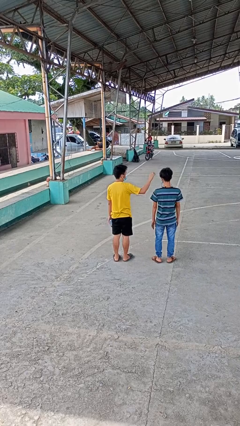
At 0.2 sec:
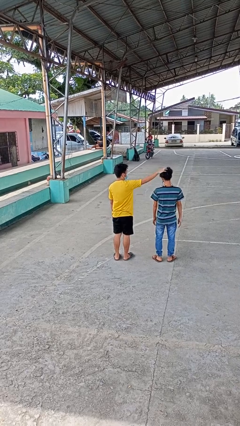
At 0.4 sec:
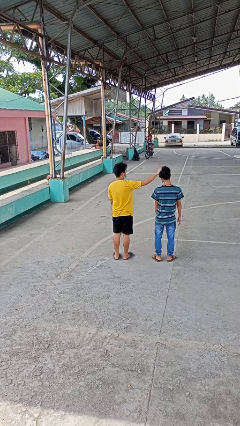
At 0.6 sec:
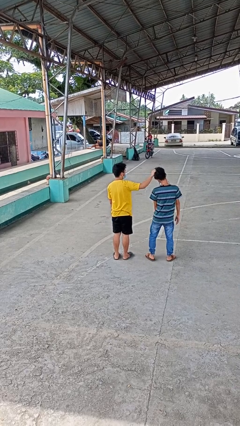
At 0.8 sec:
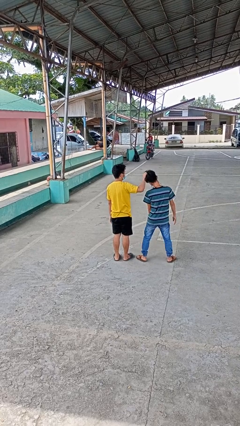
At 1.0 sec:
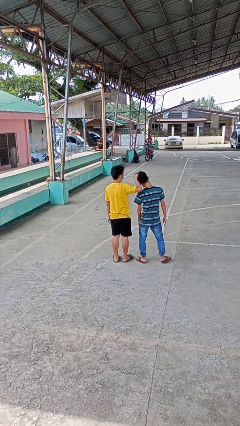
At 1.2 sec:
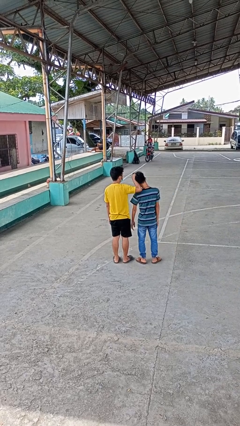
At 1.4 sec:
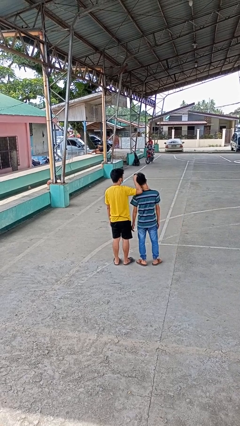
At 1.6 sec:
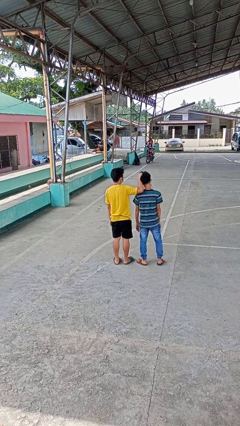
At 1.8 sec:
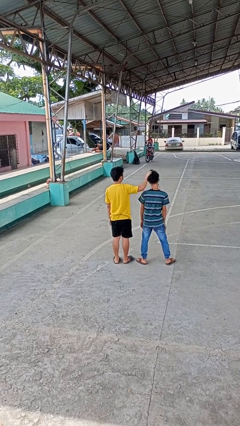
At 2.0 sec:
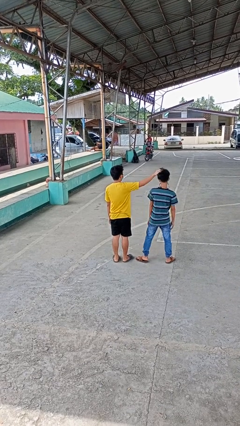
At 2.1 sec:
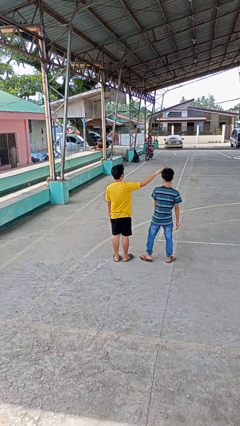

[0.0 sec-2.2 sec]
person grabs person by hair

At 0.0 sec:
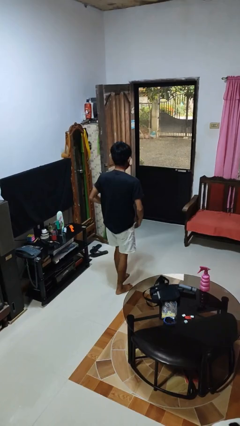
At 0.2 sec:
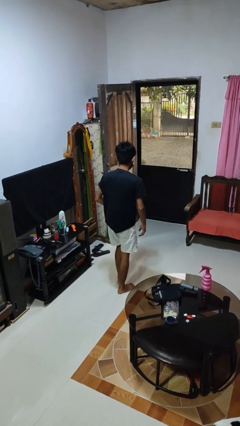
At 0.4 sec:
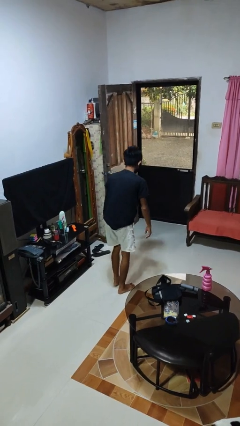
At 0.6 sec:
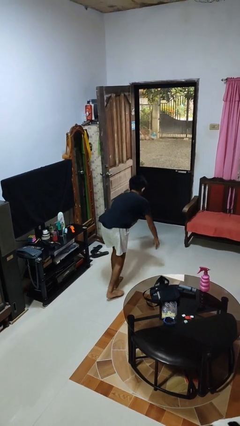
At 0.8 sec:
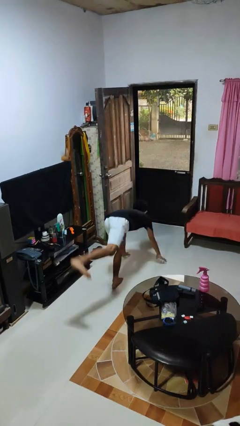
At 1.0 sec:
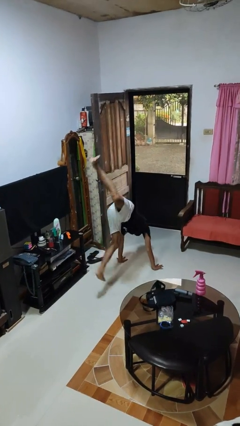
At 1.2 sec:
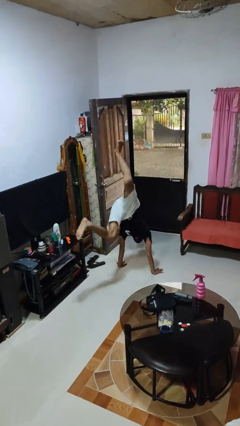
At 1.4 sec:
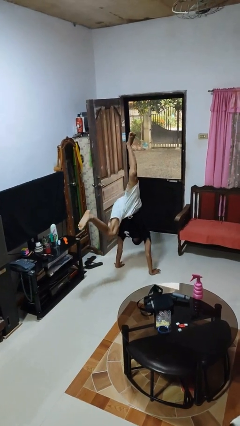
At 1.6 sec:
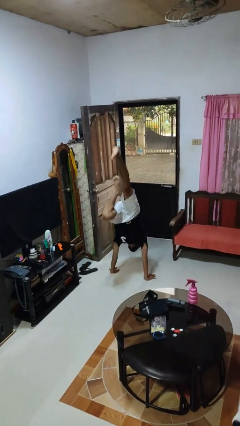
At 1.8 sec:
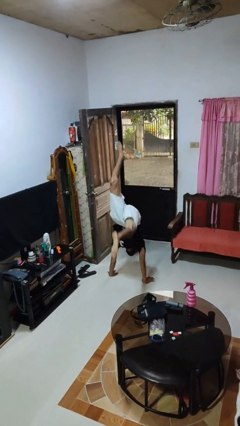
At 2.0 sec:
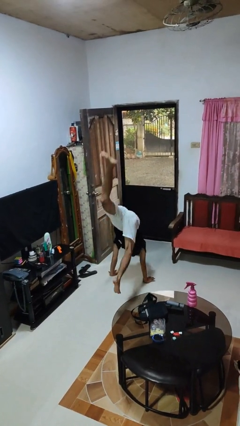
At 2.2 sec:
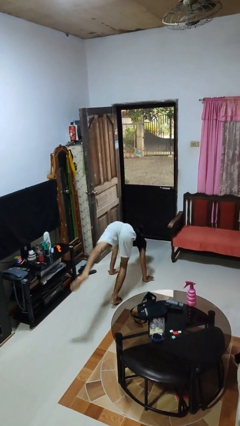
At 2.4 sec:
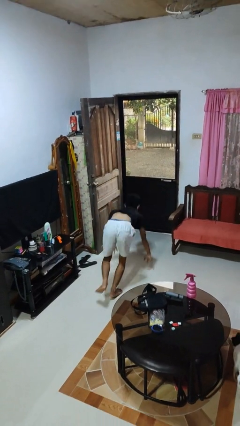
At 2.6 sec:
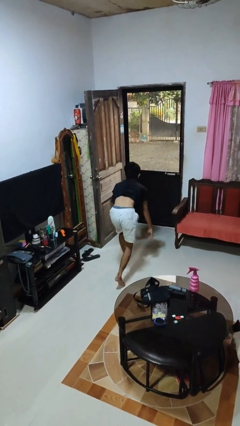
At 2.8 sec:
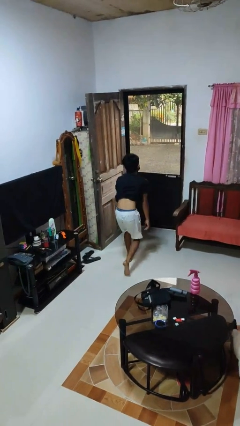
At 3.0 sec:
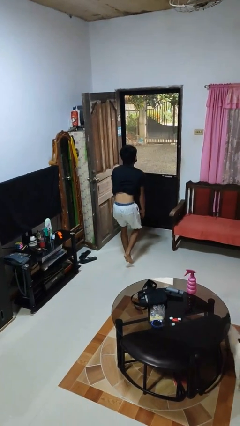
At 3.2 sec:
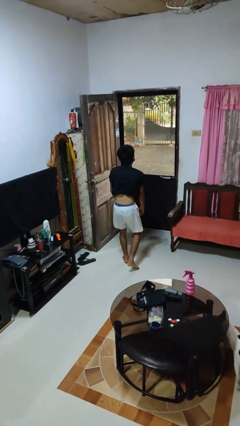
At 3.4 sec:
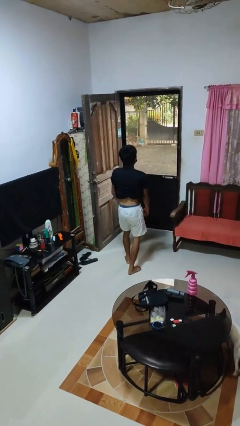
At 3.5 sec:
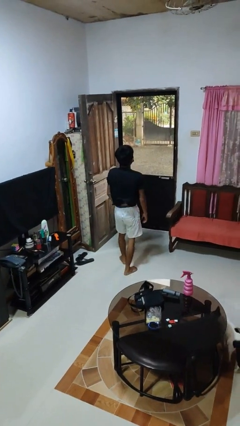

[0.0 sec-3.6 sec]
person handstand

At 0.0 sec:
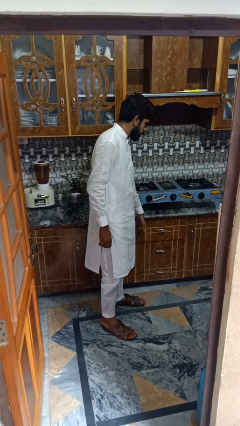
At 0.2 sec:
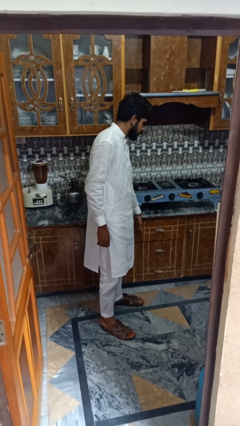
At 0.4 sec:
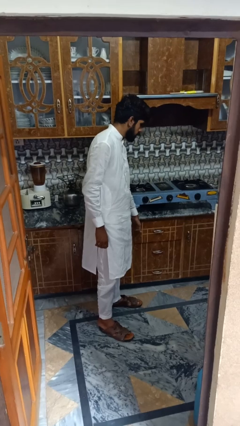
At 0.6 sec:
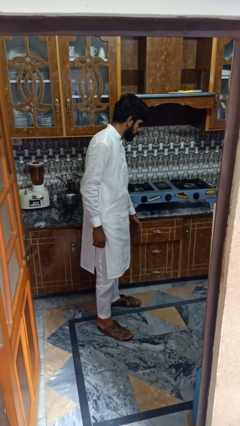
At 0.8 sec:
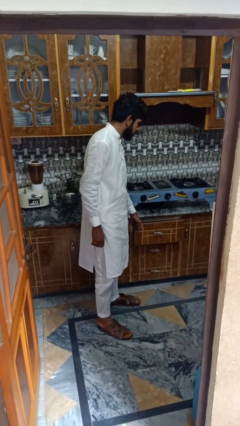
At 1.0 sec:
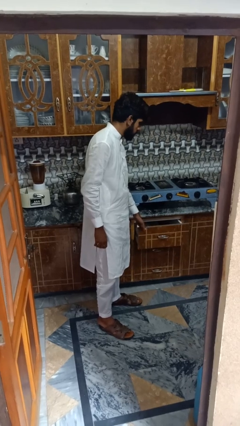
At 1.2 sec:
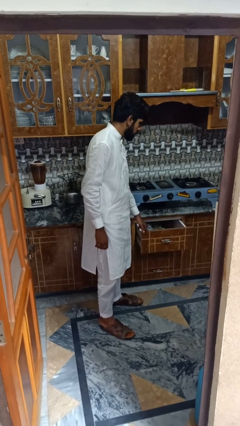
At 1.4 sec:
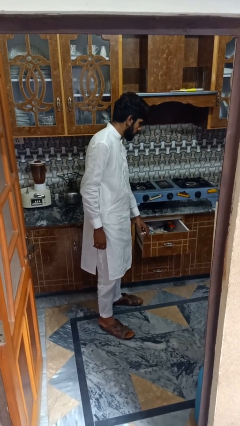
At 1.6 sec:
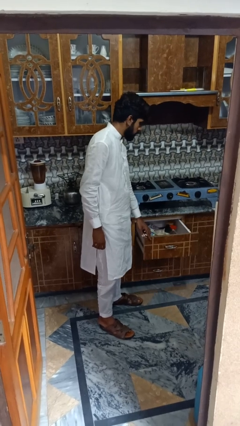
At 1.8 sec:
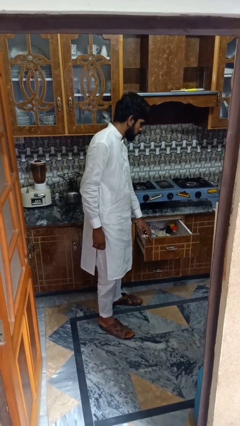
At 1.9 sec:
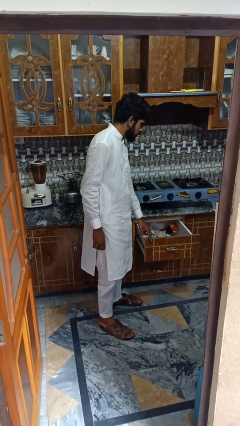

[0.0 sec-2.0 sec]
person opens kitchen drawer

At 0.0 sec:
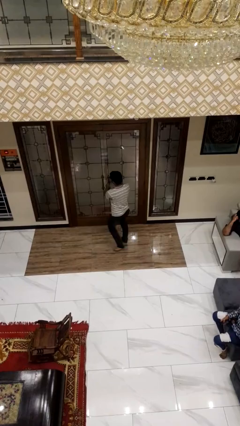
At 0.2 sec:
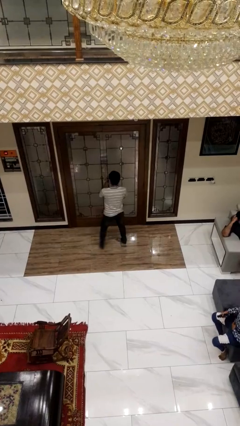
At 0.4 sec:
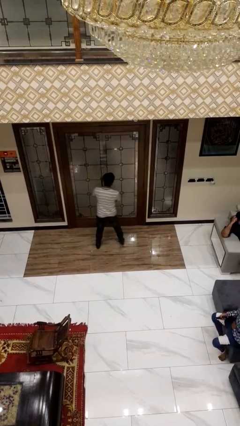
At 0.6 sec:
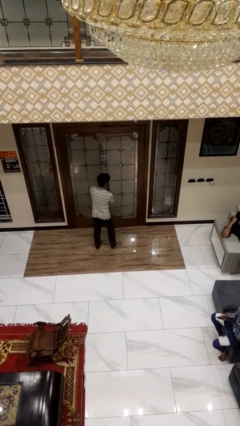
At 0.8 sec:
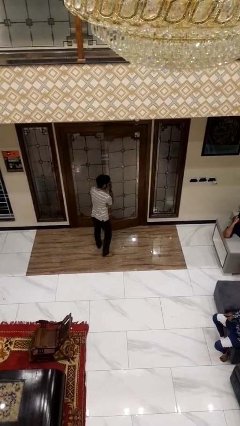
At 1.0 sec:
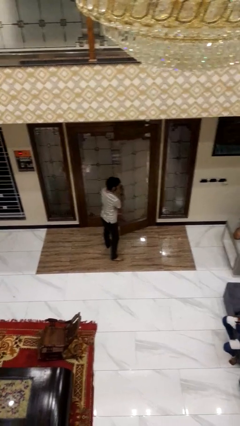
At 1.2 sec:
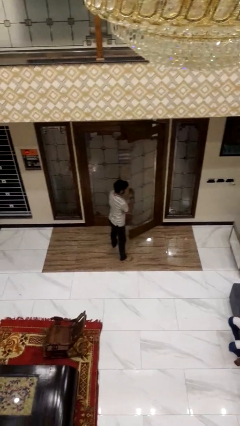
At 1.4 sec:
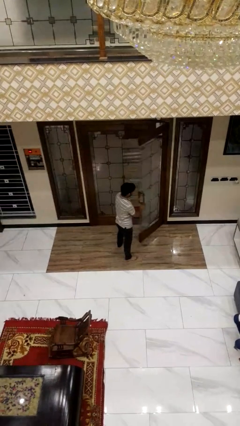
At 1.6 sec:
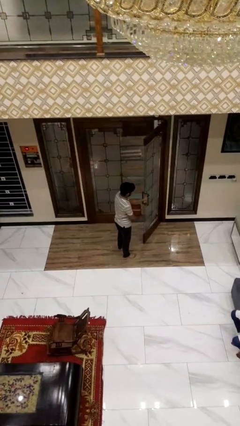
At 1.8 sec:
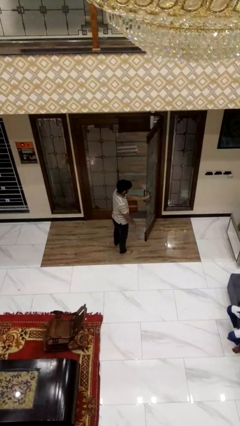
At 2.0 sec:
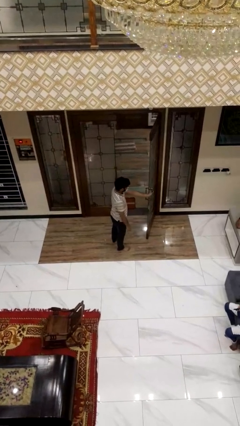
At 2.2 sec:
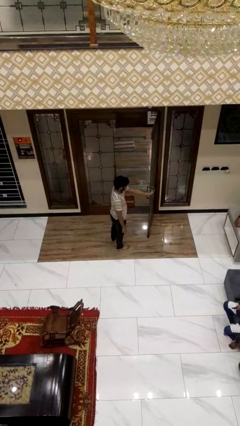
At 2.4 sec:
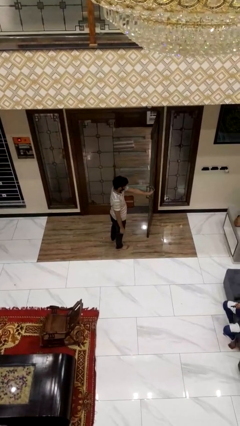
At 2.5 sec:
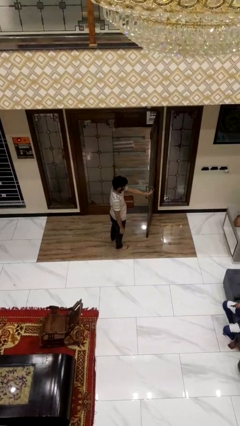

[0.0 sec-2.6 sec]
person opens facility door

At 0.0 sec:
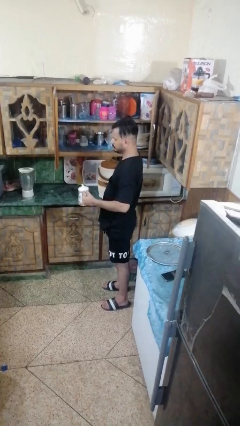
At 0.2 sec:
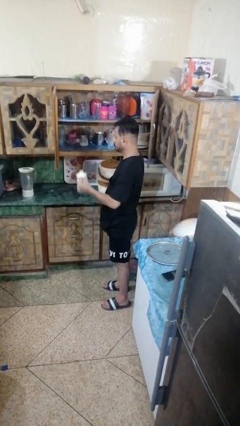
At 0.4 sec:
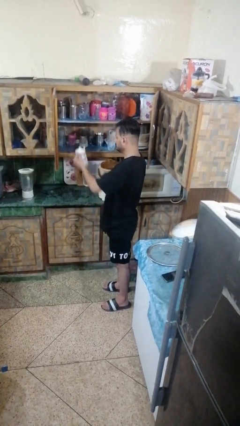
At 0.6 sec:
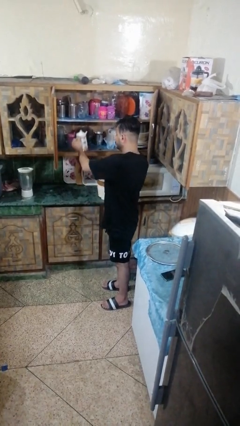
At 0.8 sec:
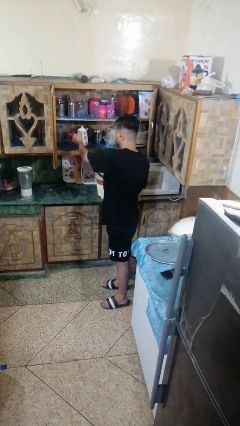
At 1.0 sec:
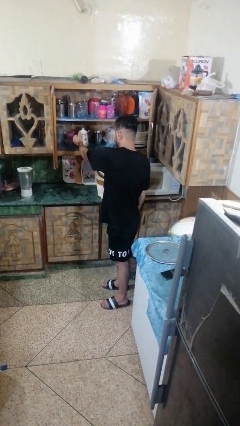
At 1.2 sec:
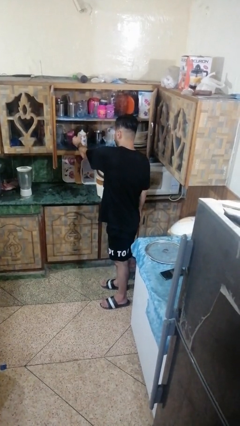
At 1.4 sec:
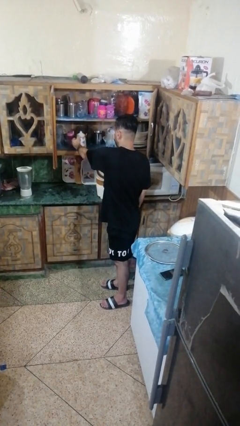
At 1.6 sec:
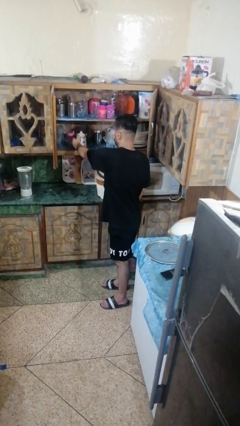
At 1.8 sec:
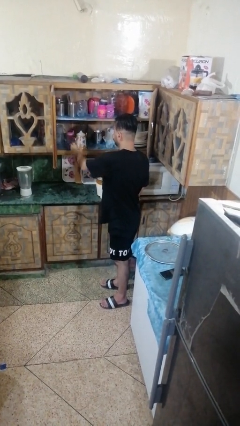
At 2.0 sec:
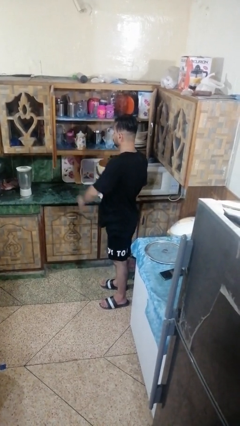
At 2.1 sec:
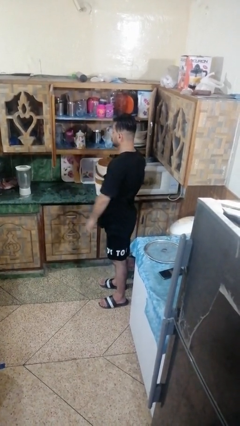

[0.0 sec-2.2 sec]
person puts down object into cabinet

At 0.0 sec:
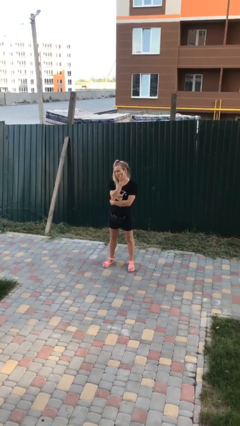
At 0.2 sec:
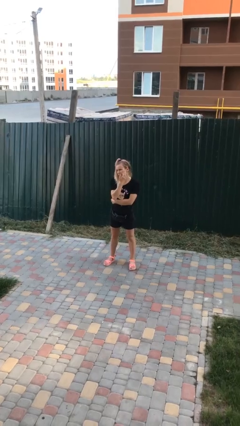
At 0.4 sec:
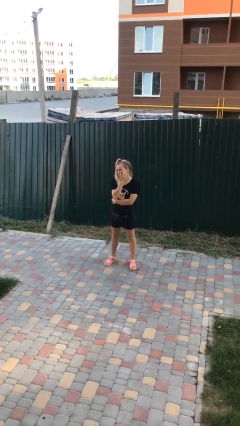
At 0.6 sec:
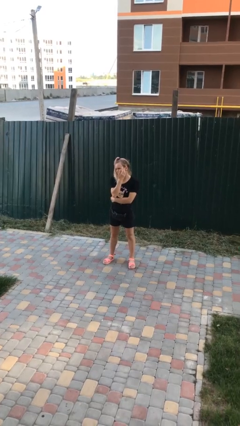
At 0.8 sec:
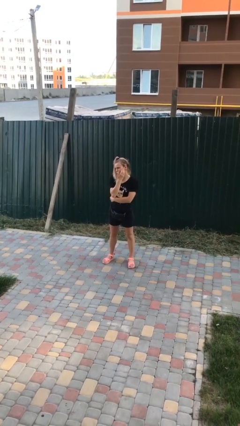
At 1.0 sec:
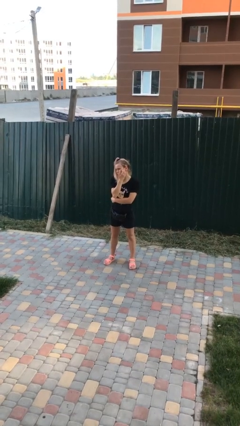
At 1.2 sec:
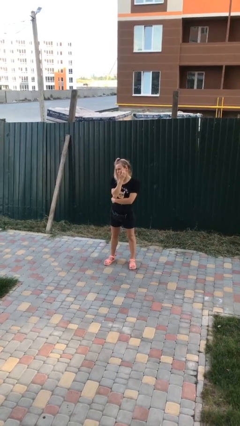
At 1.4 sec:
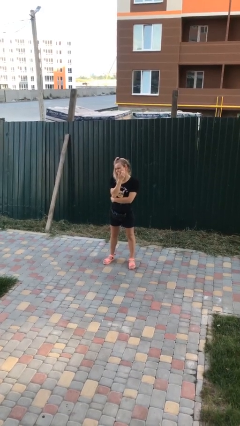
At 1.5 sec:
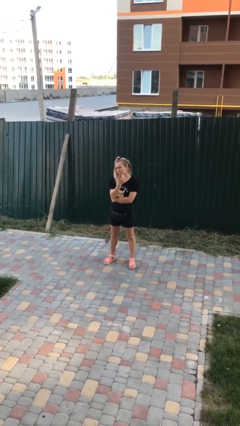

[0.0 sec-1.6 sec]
person scratches face

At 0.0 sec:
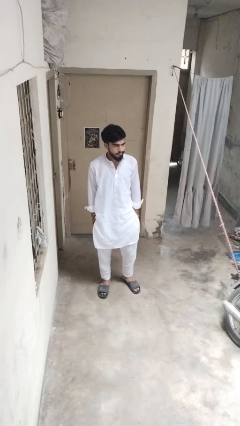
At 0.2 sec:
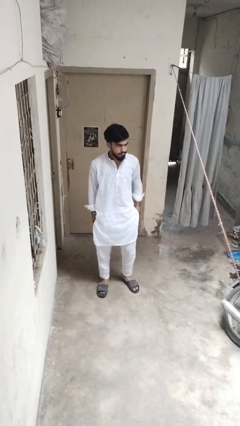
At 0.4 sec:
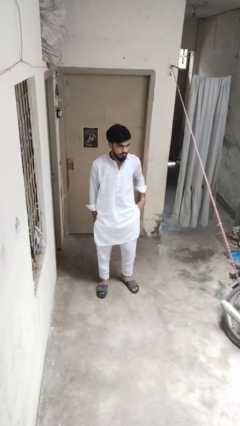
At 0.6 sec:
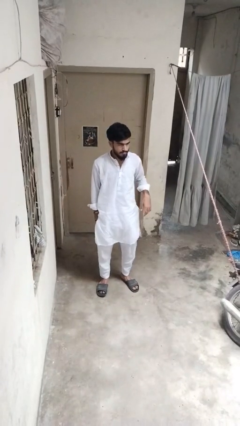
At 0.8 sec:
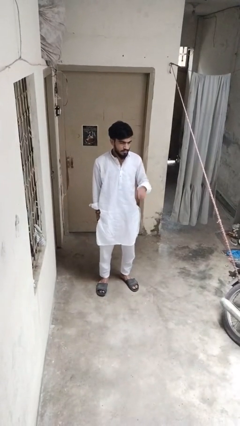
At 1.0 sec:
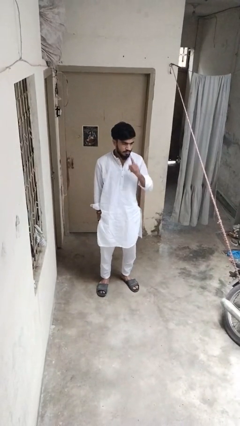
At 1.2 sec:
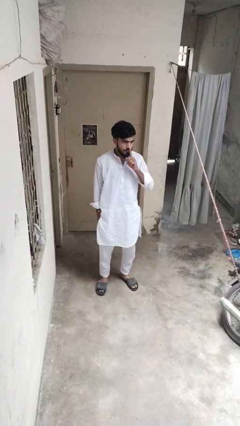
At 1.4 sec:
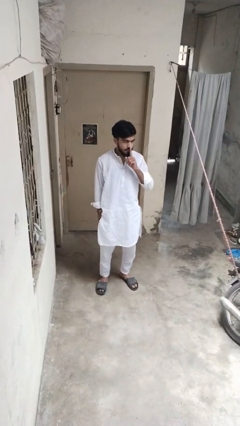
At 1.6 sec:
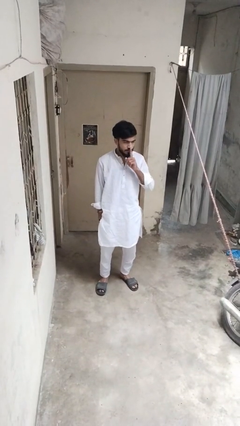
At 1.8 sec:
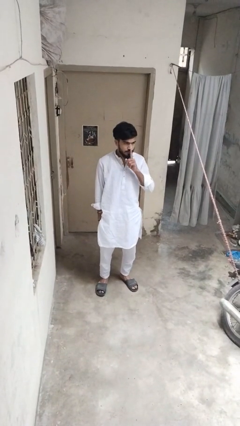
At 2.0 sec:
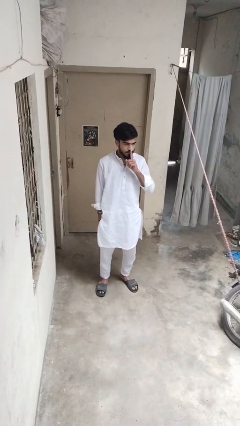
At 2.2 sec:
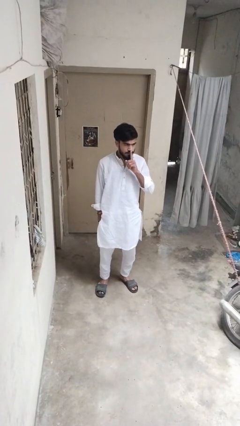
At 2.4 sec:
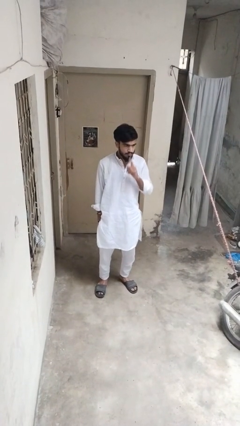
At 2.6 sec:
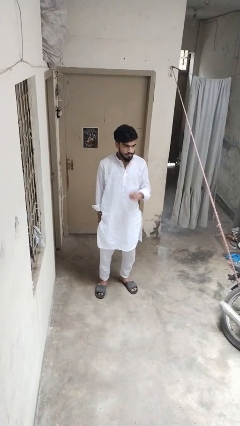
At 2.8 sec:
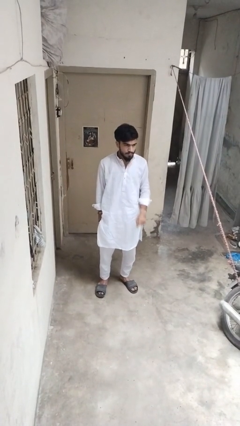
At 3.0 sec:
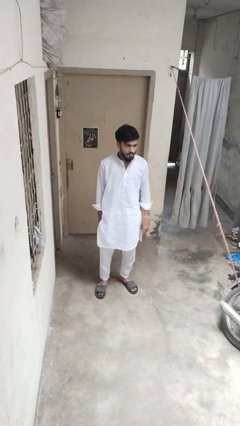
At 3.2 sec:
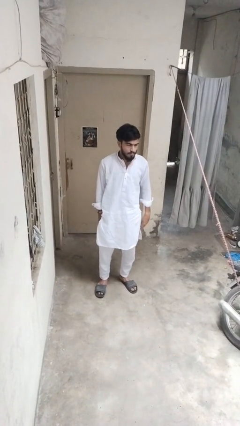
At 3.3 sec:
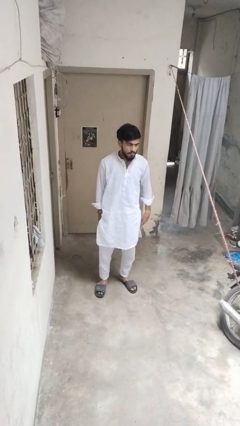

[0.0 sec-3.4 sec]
person gestures be quiet
